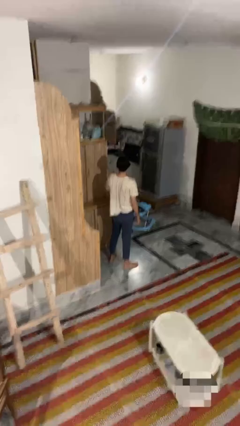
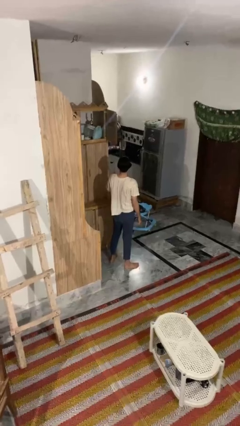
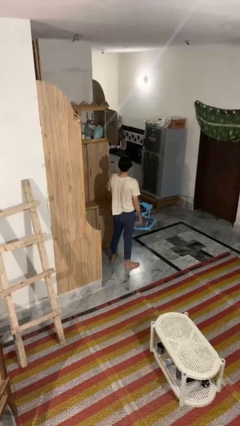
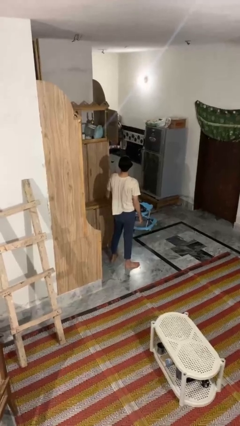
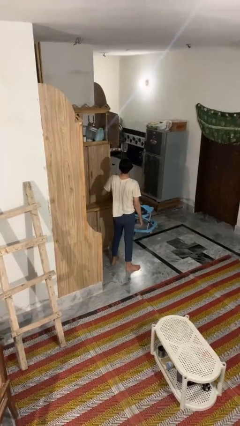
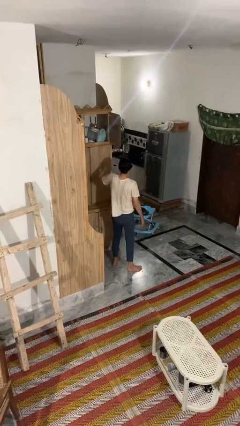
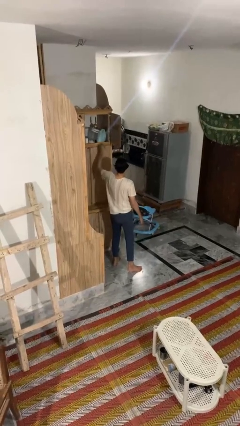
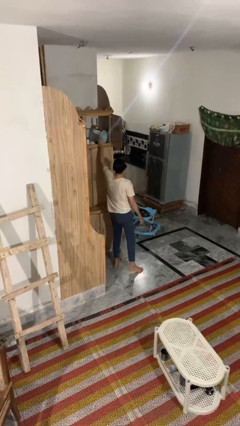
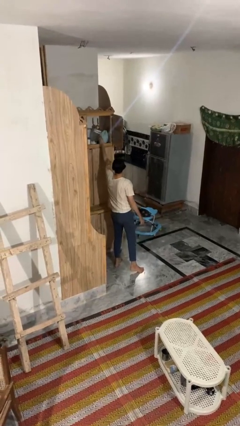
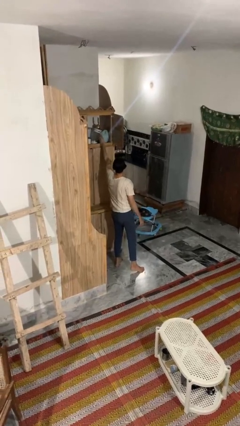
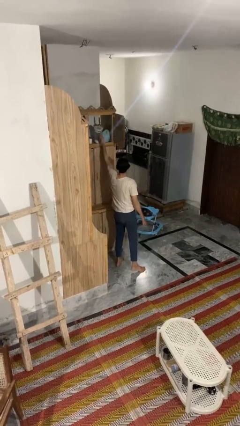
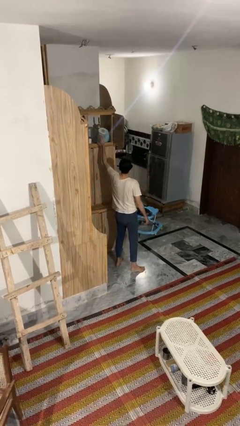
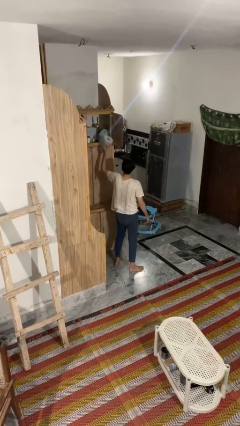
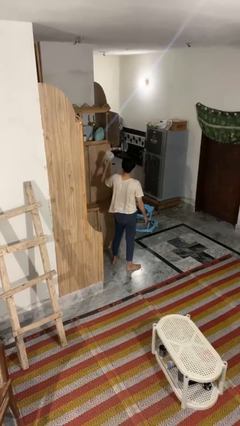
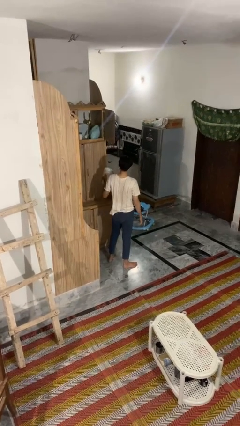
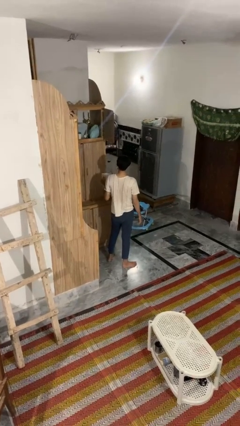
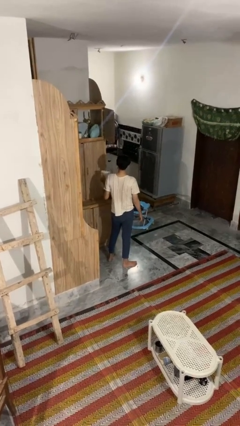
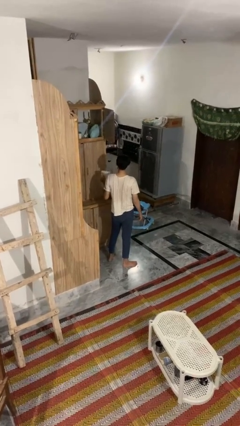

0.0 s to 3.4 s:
person picks up object from shelf

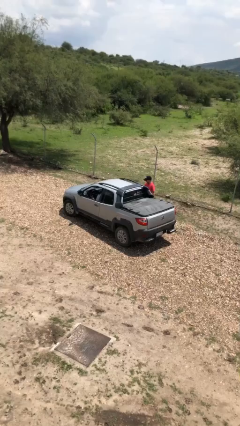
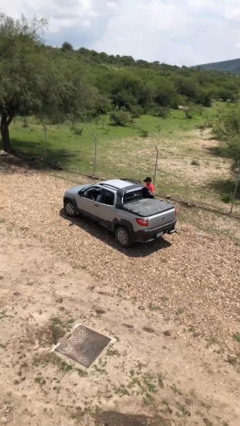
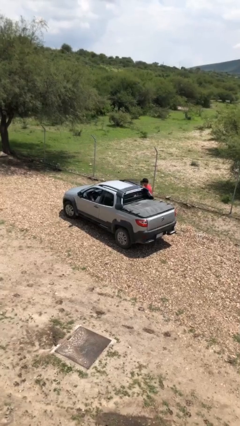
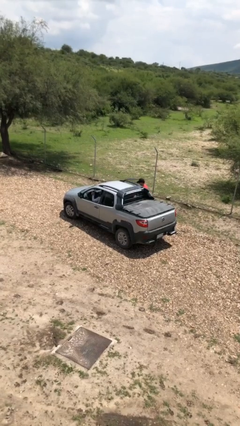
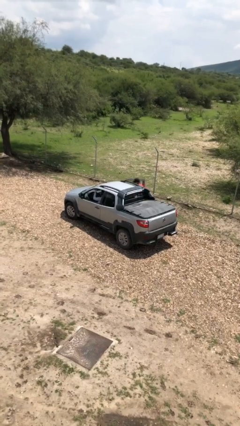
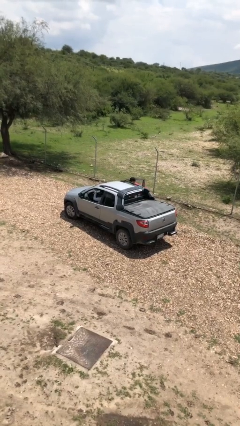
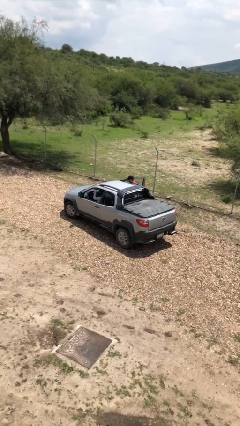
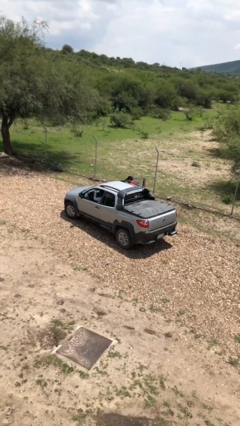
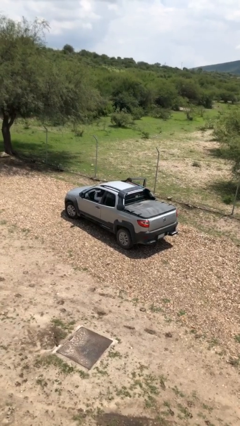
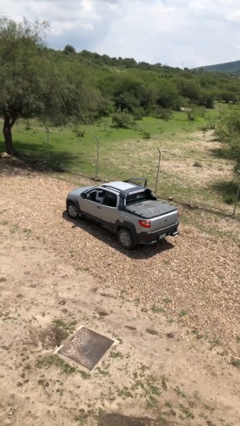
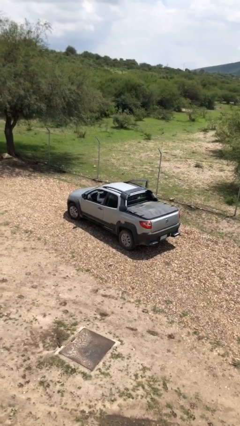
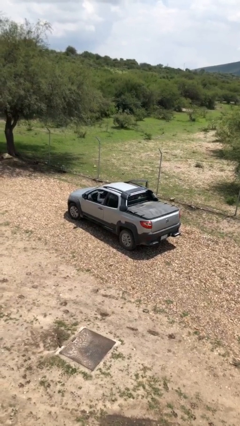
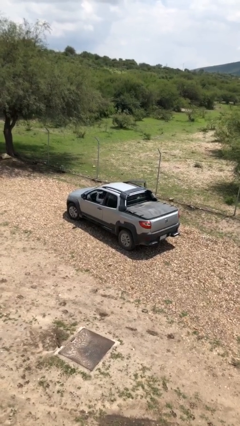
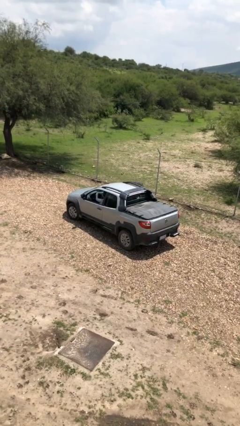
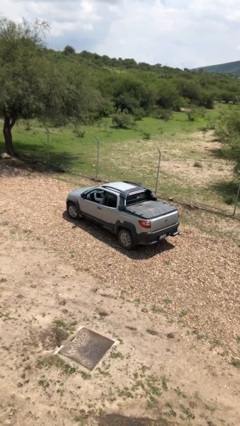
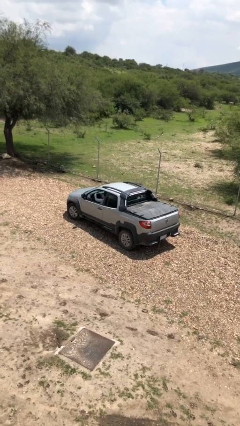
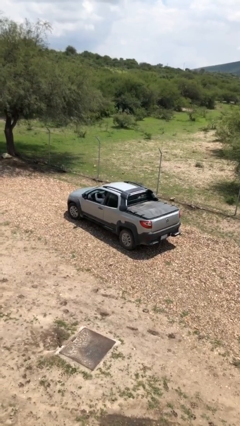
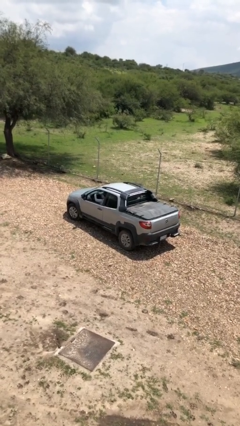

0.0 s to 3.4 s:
car picks up person

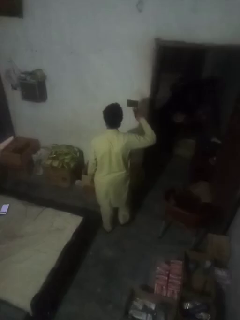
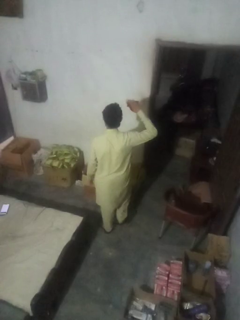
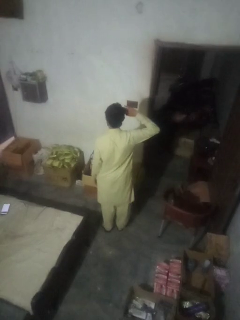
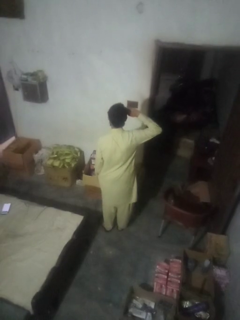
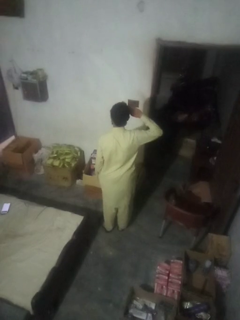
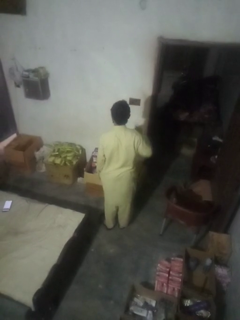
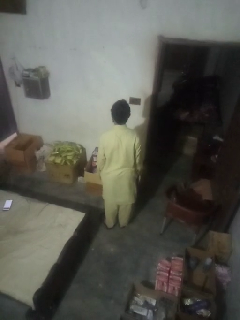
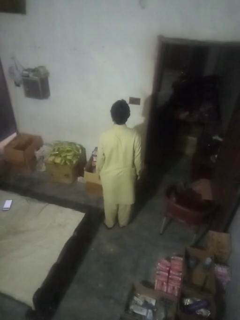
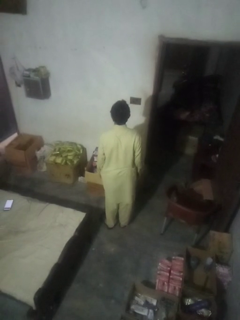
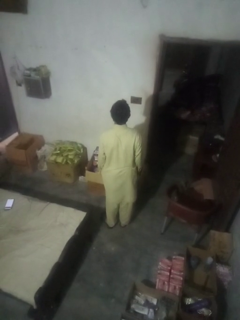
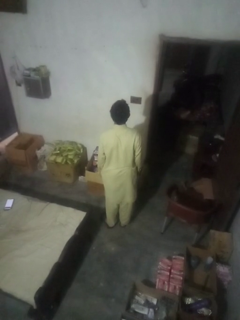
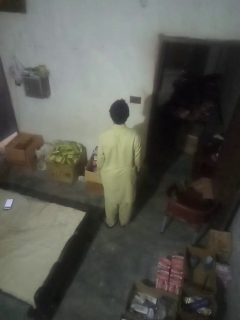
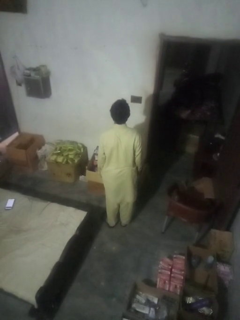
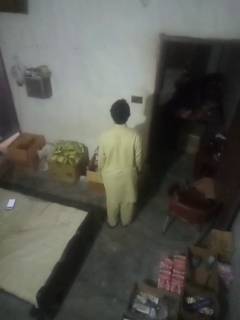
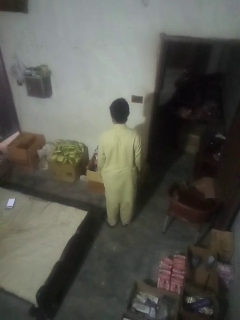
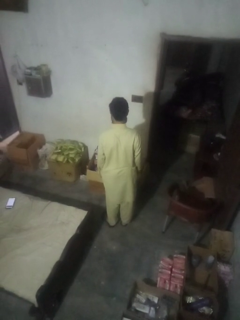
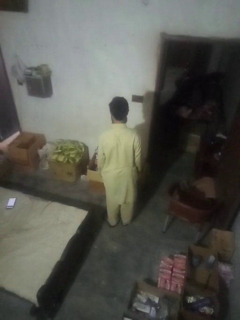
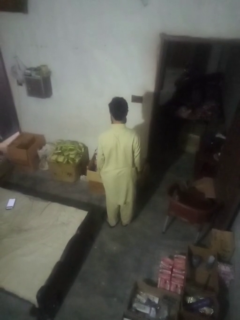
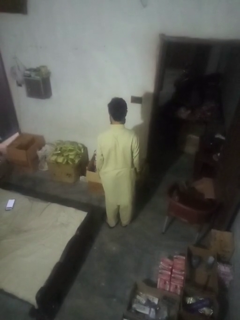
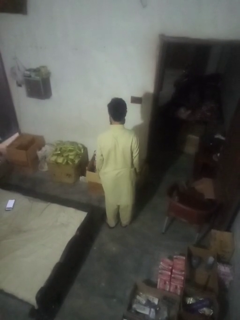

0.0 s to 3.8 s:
person salutes

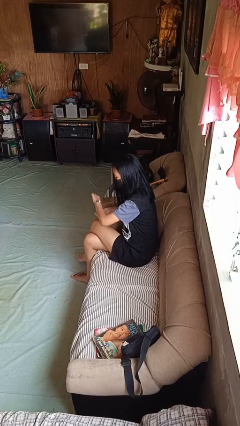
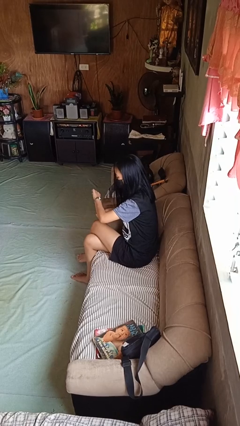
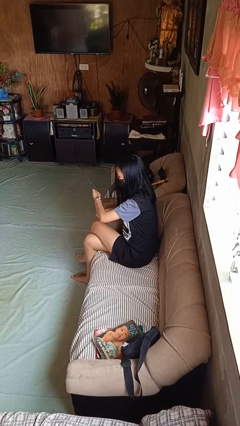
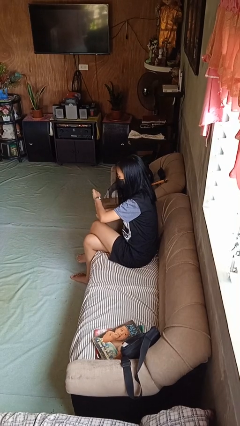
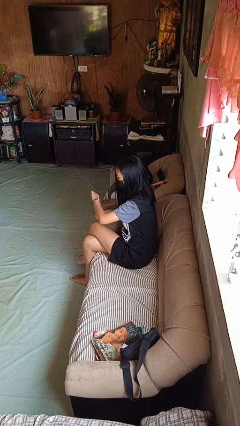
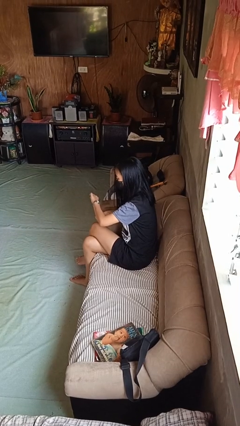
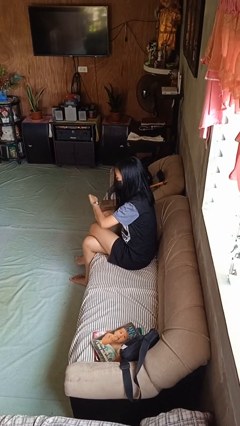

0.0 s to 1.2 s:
person looks at wristwatch

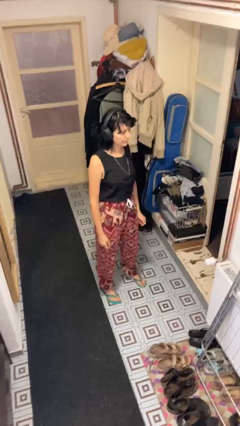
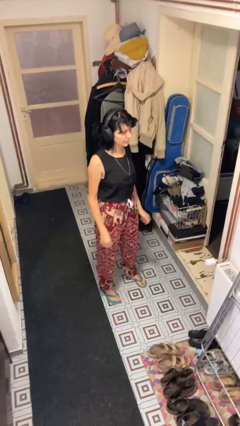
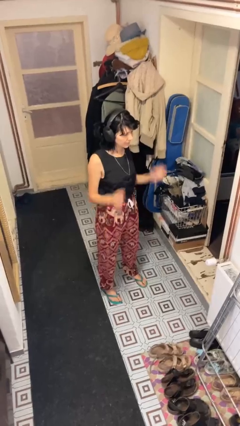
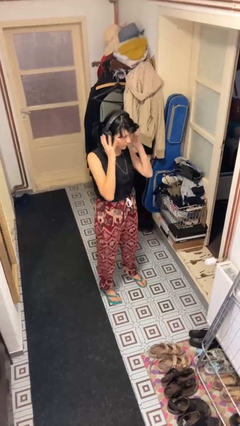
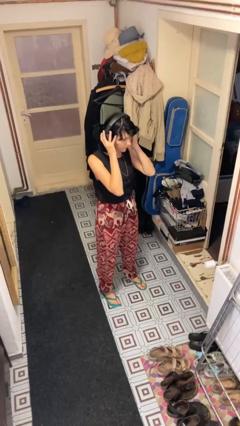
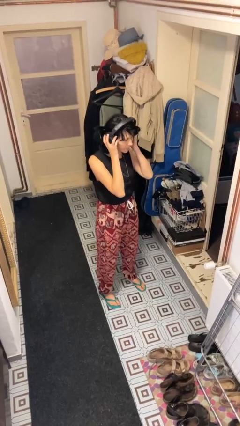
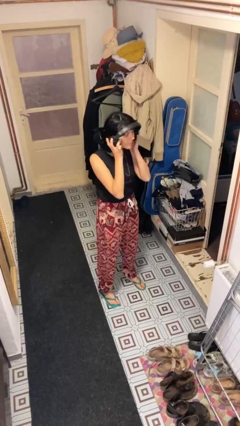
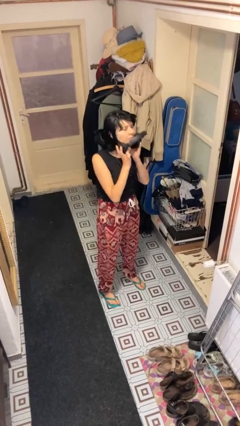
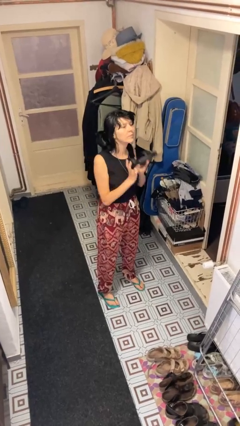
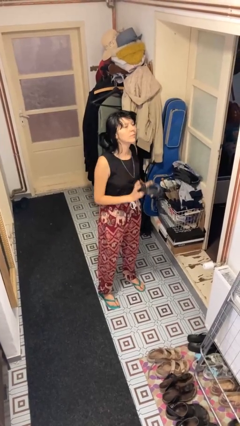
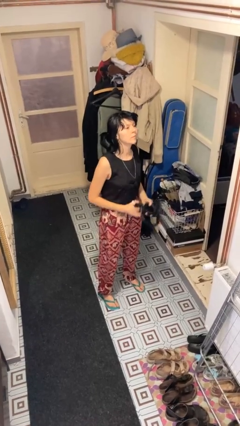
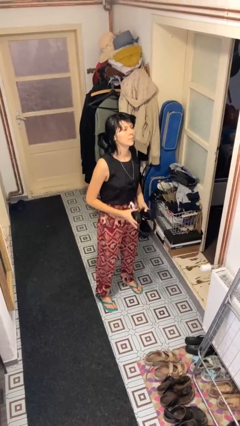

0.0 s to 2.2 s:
person takes off headphones

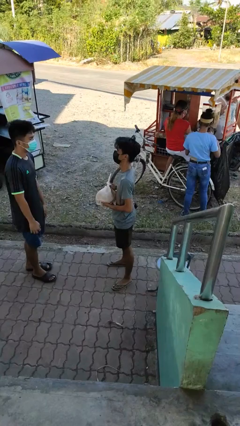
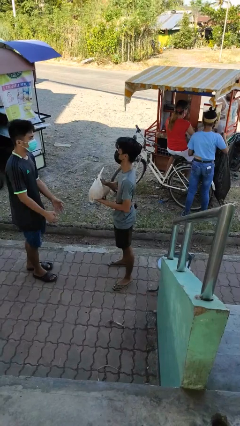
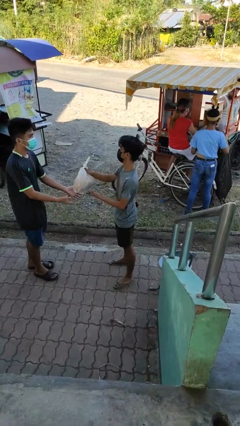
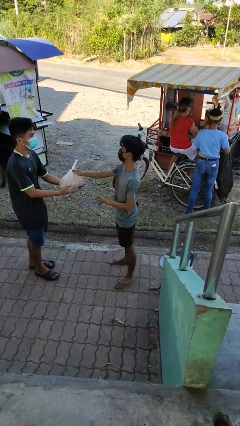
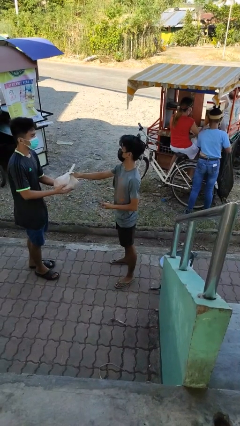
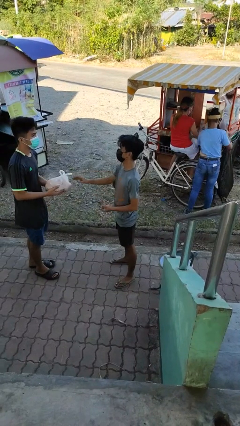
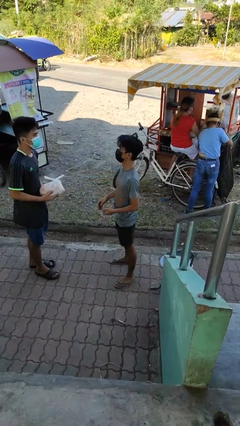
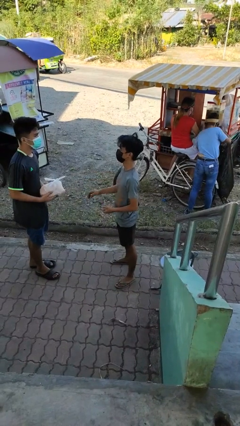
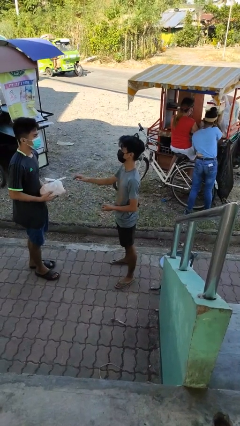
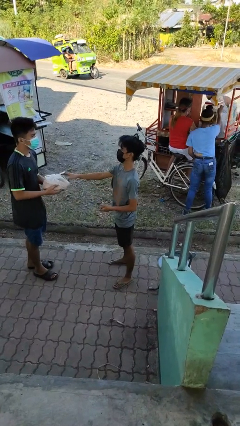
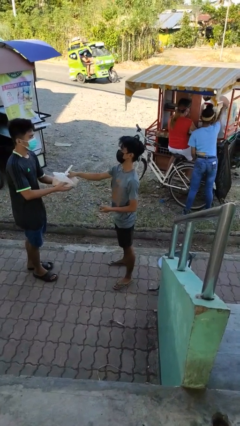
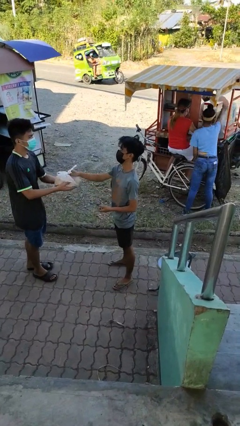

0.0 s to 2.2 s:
person transfers object to person

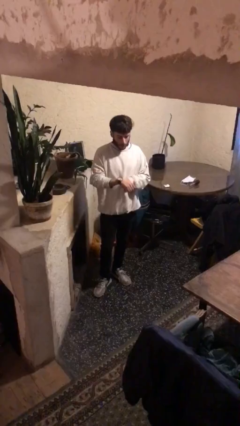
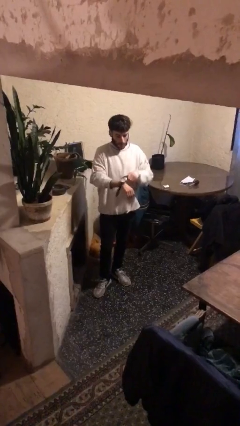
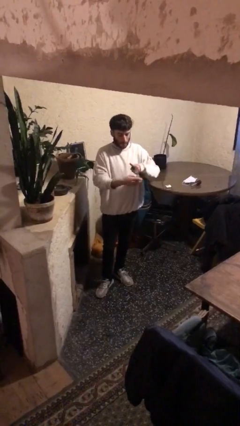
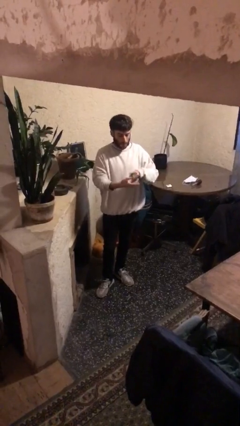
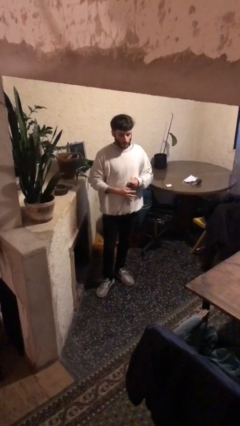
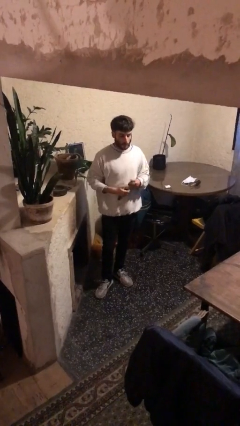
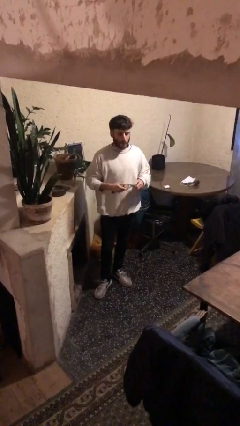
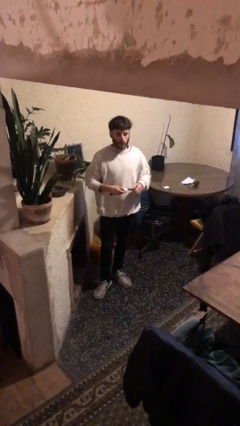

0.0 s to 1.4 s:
person takes off wristwatch

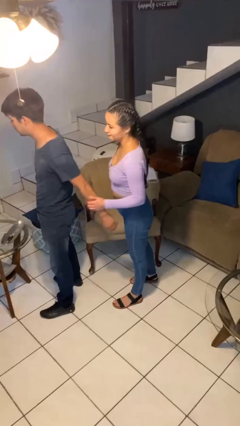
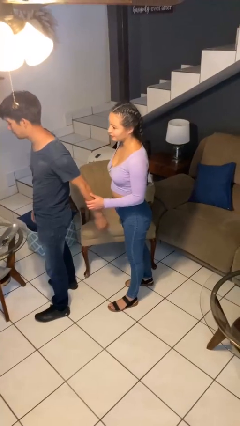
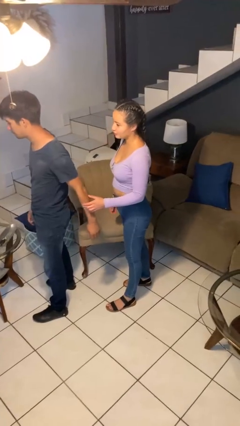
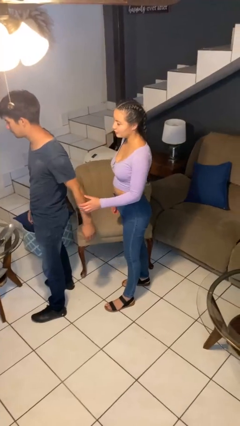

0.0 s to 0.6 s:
person grabs person by forearm
